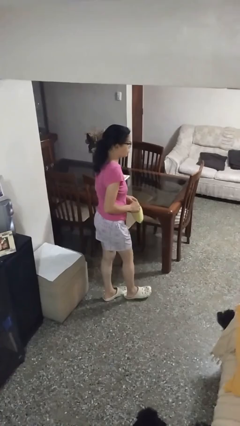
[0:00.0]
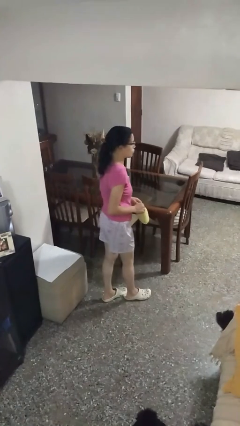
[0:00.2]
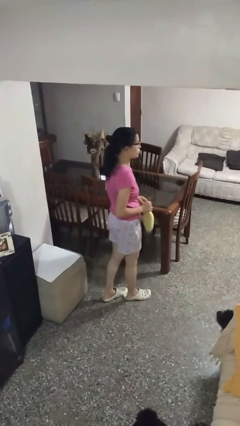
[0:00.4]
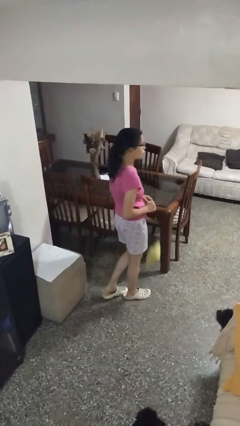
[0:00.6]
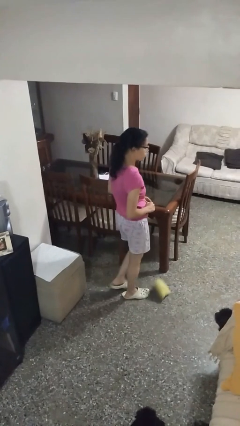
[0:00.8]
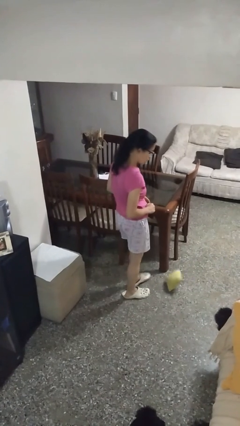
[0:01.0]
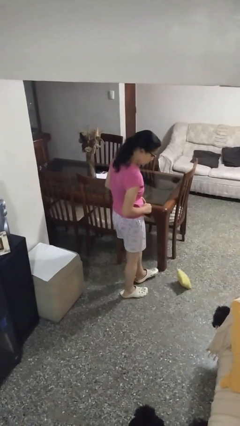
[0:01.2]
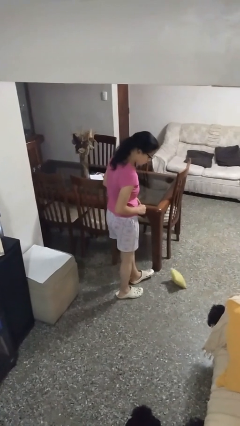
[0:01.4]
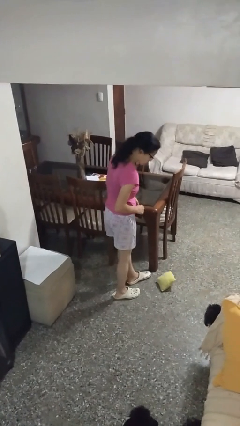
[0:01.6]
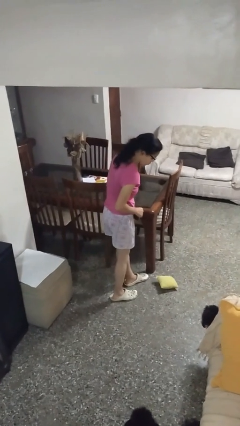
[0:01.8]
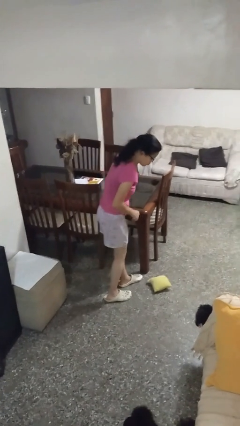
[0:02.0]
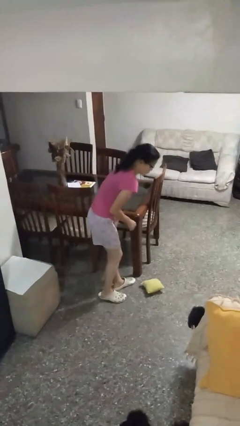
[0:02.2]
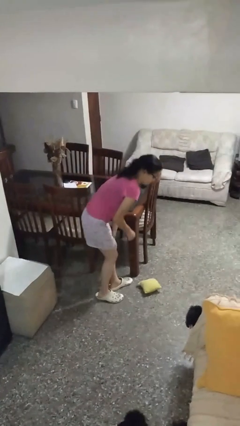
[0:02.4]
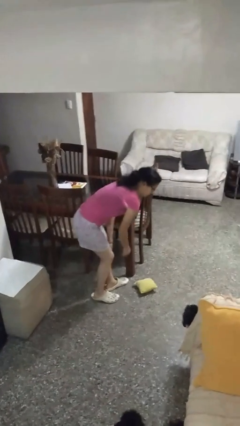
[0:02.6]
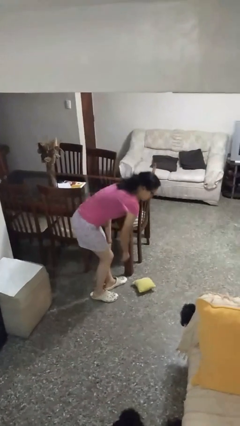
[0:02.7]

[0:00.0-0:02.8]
person drops object

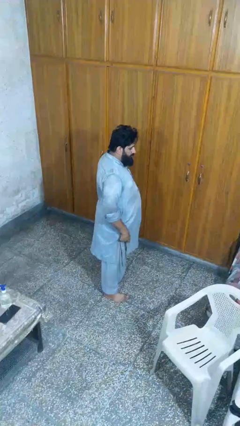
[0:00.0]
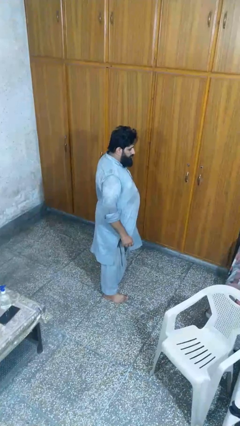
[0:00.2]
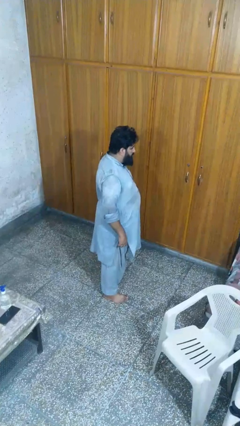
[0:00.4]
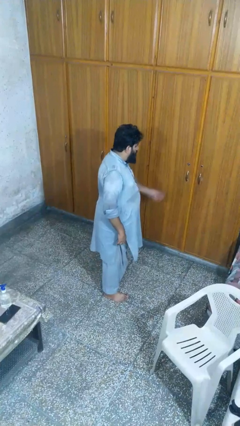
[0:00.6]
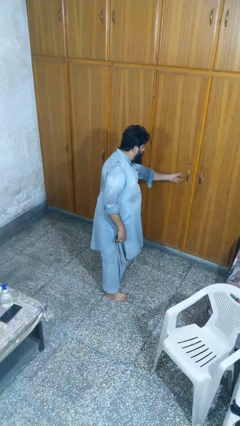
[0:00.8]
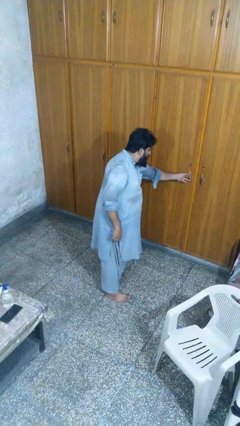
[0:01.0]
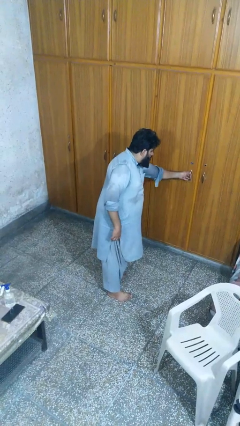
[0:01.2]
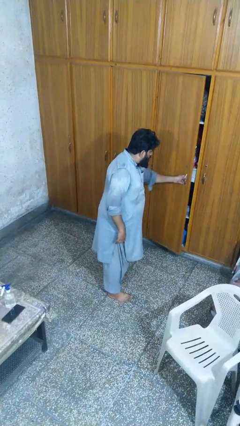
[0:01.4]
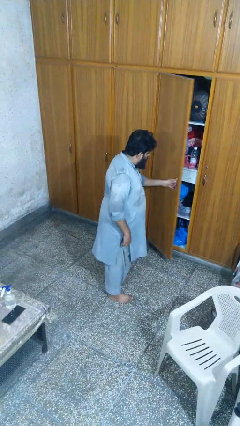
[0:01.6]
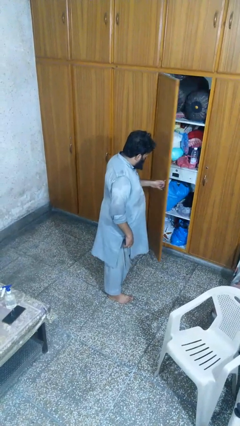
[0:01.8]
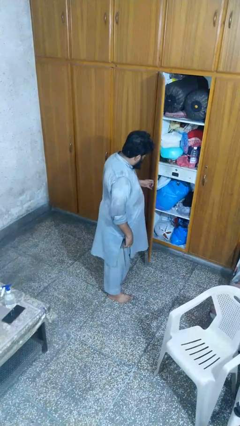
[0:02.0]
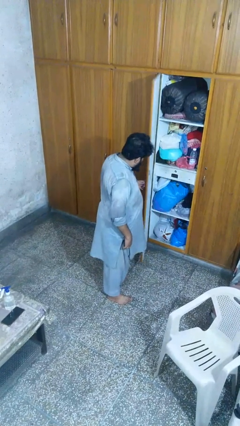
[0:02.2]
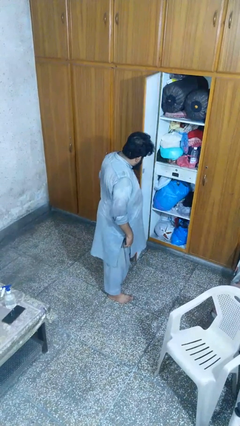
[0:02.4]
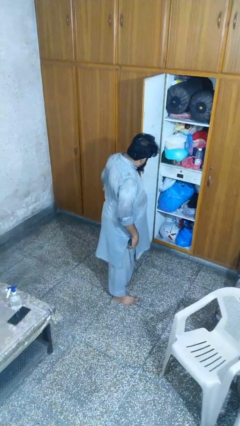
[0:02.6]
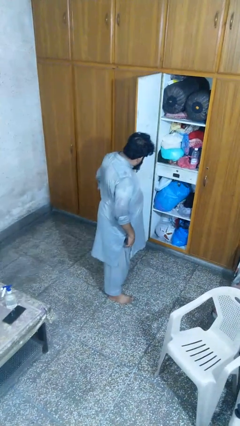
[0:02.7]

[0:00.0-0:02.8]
person opens closet door

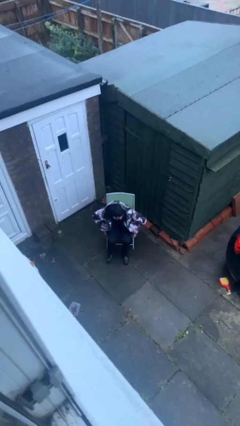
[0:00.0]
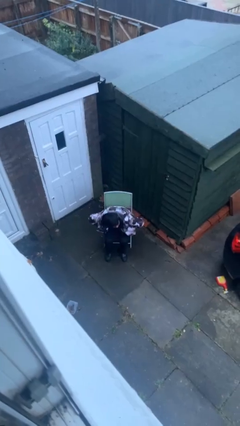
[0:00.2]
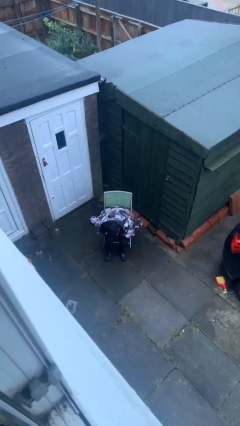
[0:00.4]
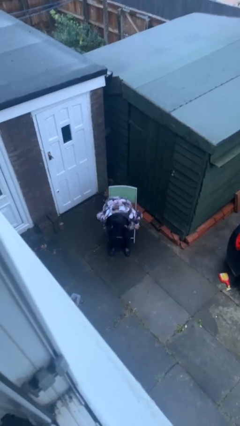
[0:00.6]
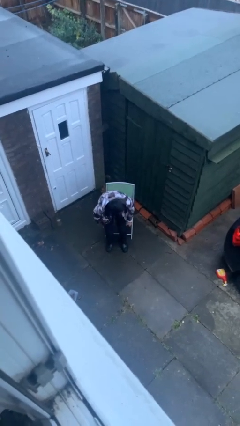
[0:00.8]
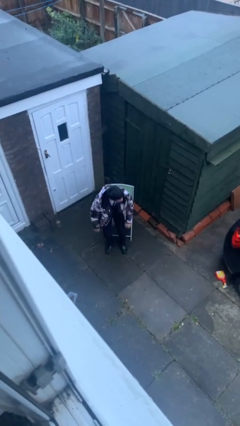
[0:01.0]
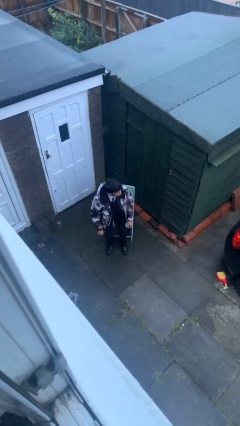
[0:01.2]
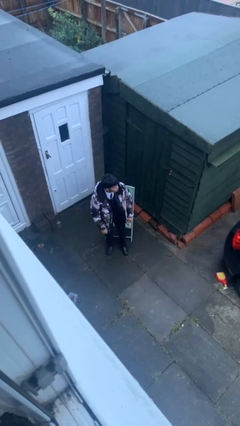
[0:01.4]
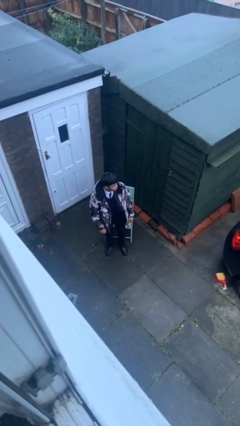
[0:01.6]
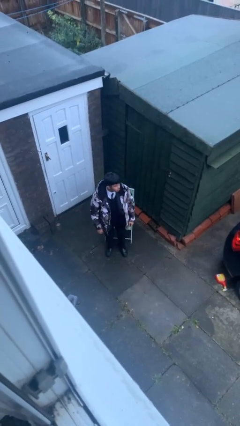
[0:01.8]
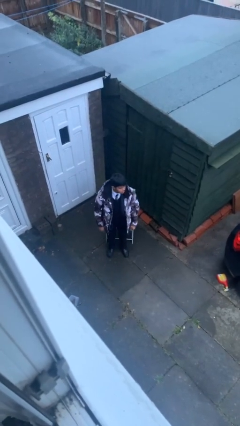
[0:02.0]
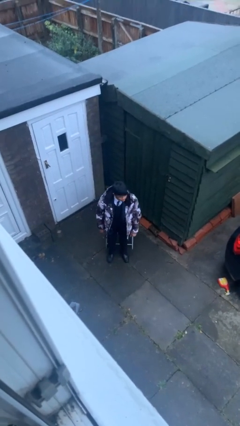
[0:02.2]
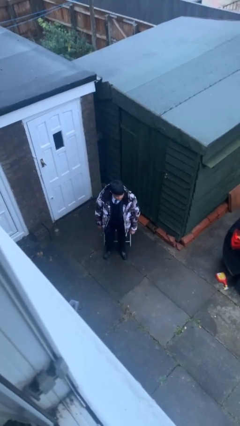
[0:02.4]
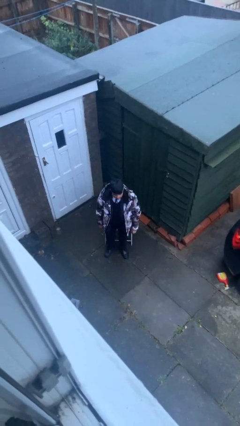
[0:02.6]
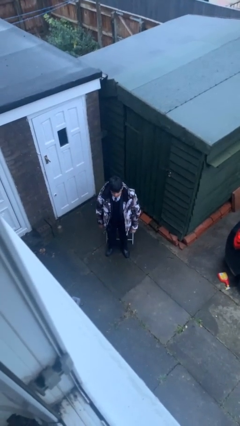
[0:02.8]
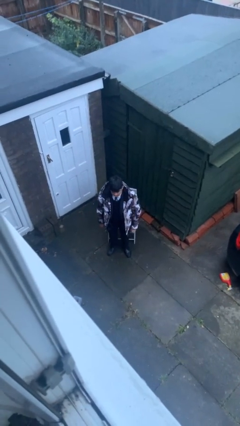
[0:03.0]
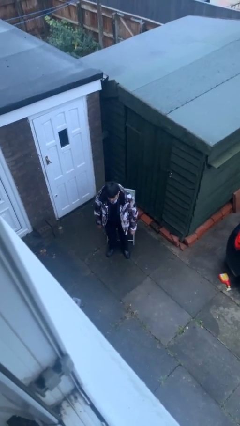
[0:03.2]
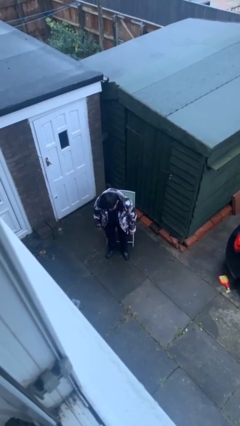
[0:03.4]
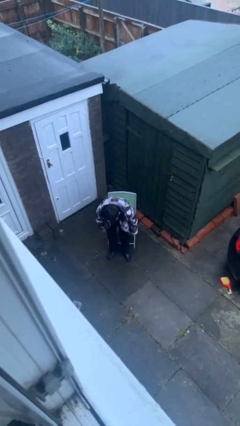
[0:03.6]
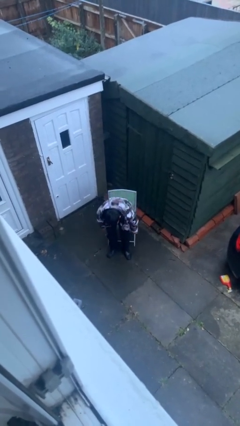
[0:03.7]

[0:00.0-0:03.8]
person stands up

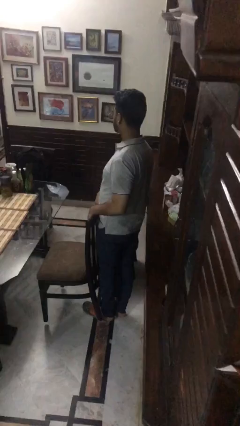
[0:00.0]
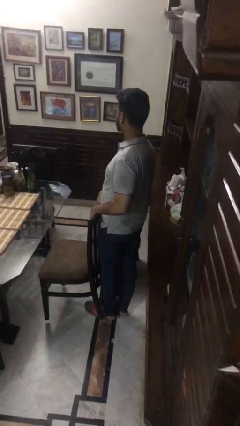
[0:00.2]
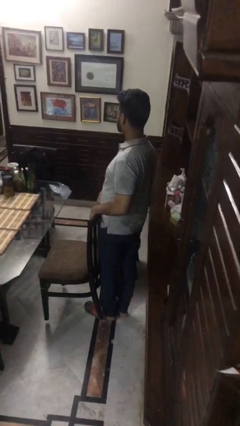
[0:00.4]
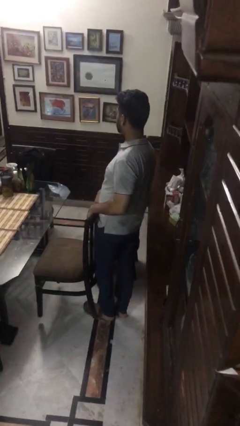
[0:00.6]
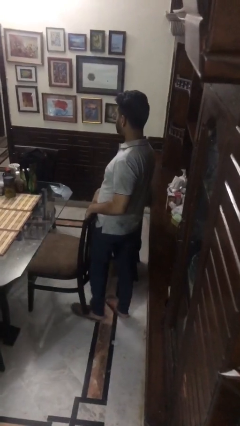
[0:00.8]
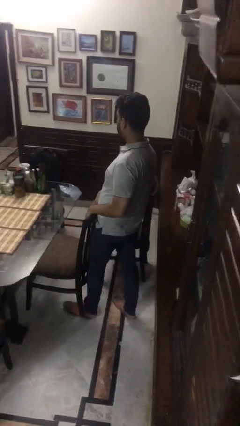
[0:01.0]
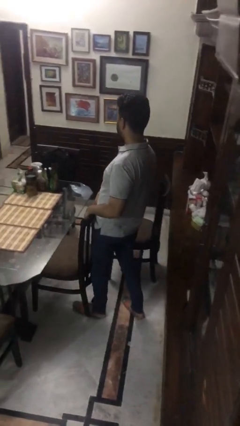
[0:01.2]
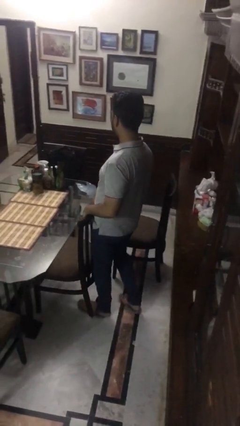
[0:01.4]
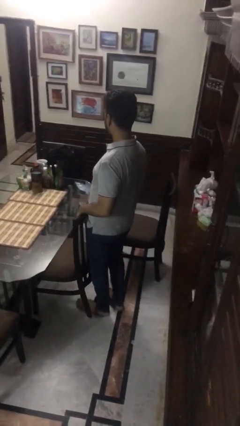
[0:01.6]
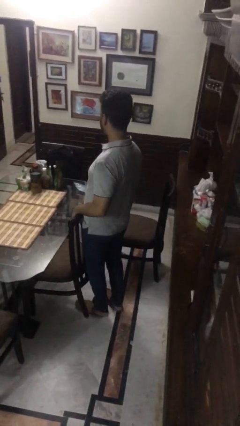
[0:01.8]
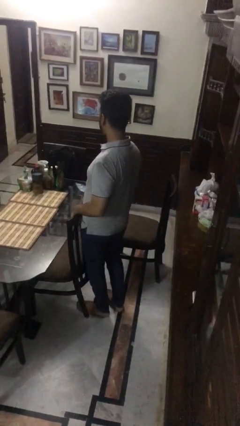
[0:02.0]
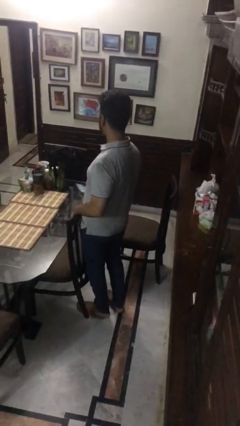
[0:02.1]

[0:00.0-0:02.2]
person pushes in chair

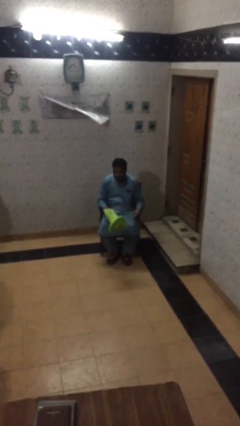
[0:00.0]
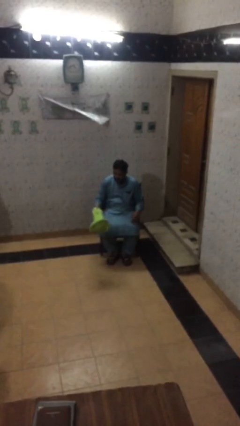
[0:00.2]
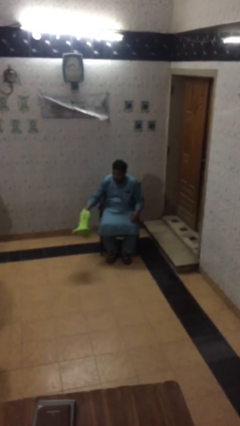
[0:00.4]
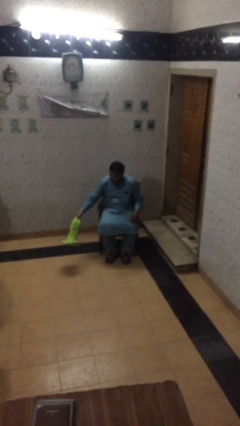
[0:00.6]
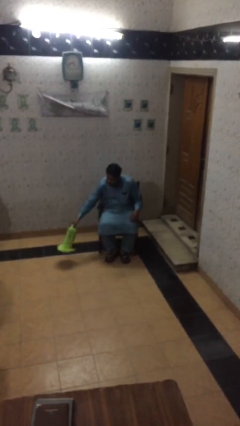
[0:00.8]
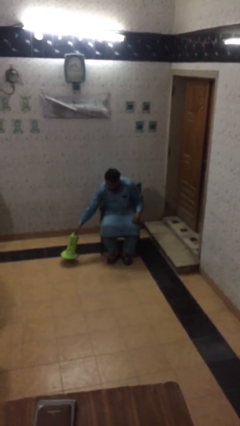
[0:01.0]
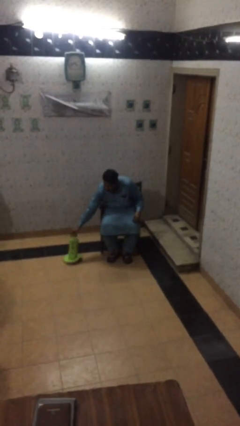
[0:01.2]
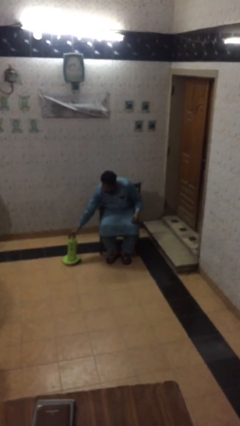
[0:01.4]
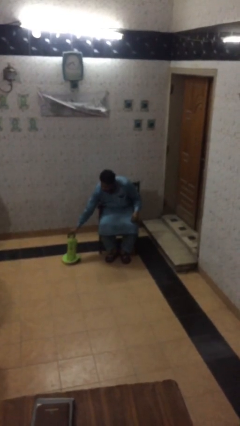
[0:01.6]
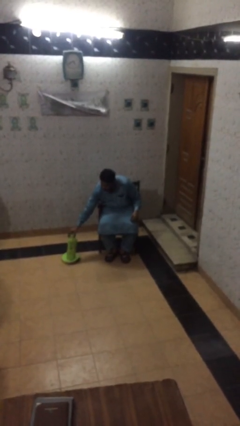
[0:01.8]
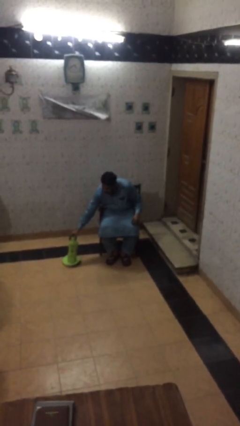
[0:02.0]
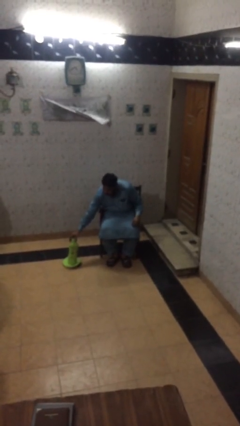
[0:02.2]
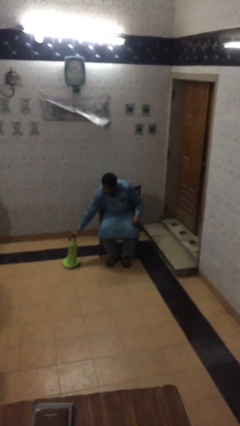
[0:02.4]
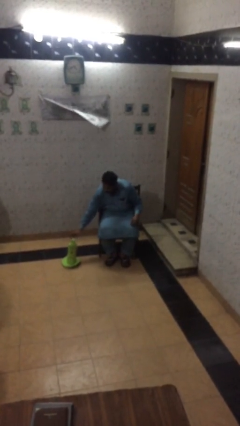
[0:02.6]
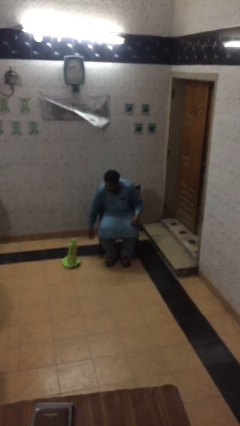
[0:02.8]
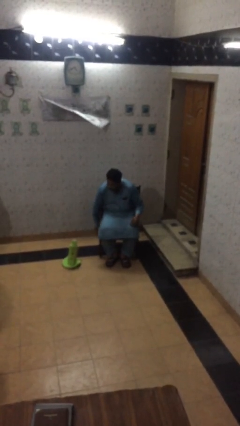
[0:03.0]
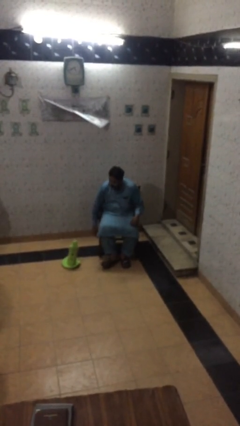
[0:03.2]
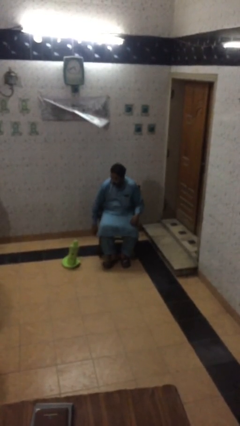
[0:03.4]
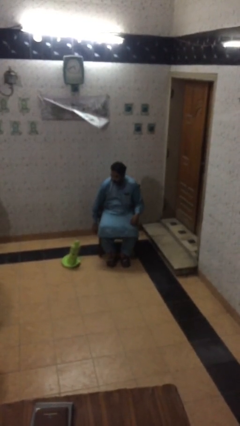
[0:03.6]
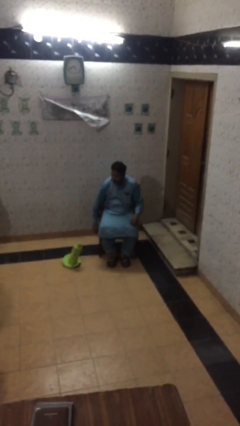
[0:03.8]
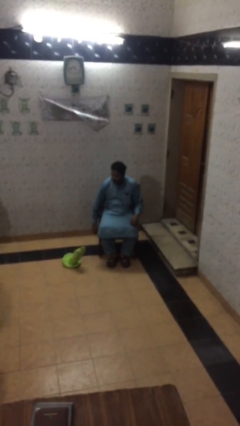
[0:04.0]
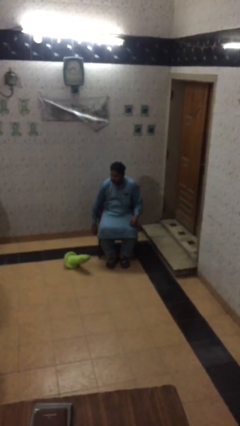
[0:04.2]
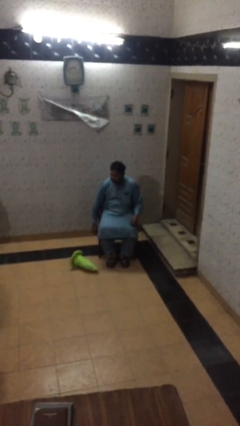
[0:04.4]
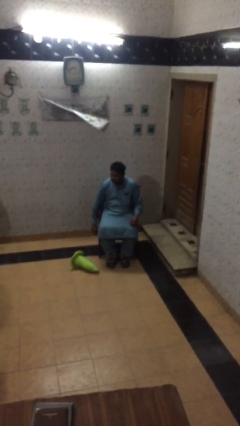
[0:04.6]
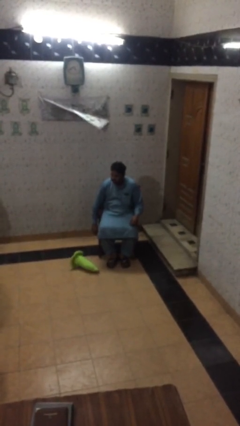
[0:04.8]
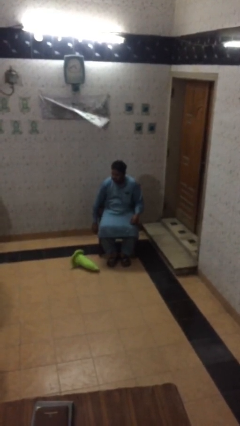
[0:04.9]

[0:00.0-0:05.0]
person puts down object on floor

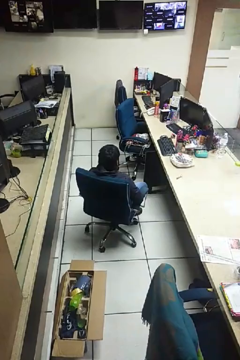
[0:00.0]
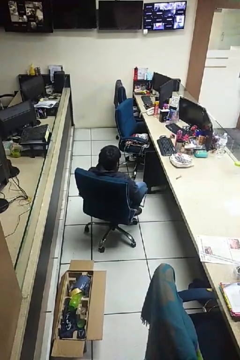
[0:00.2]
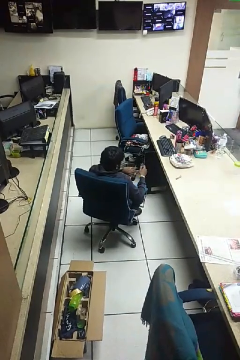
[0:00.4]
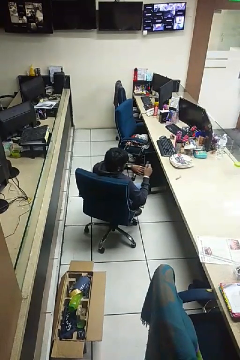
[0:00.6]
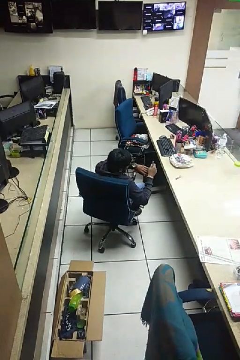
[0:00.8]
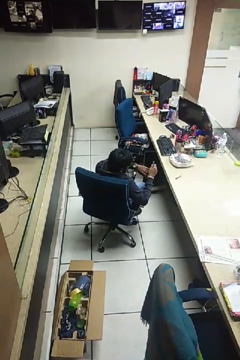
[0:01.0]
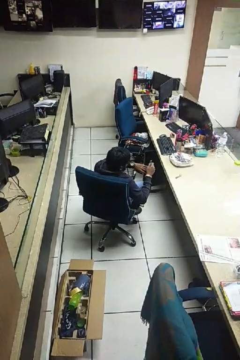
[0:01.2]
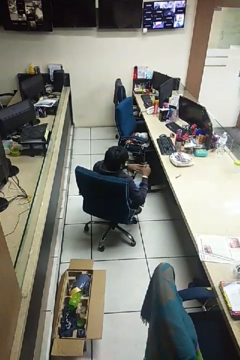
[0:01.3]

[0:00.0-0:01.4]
person files fingernails
